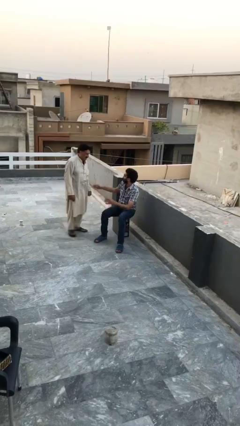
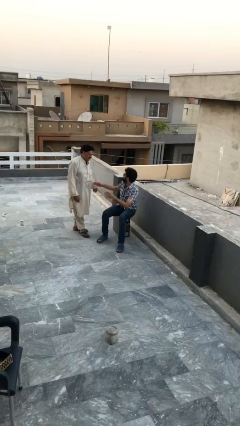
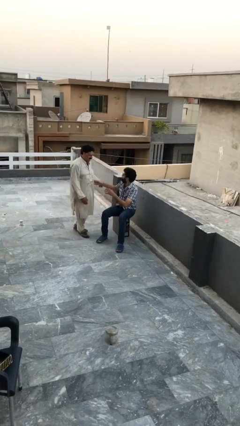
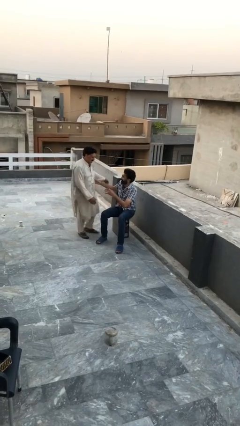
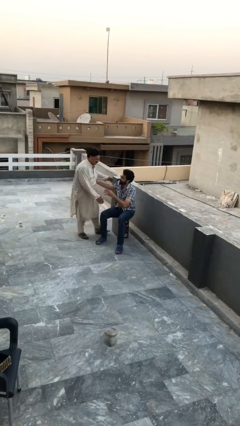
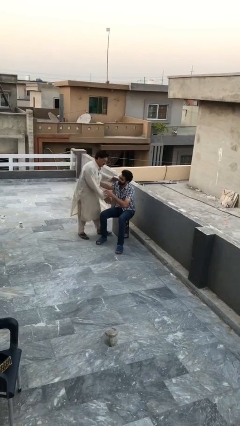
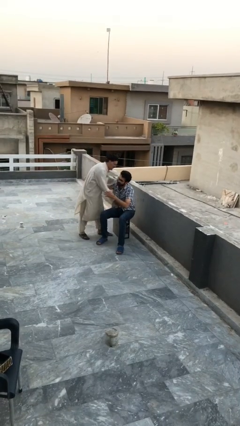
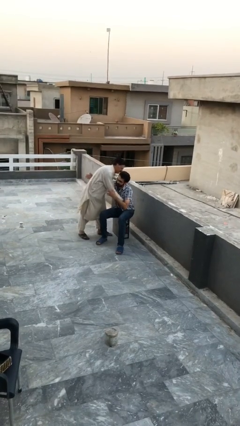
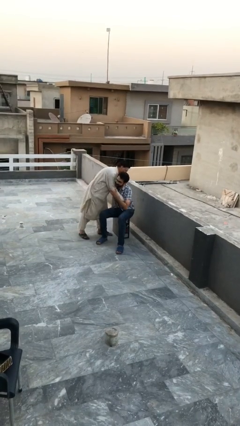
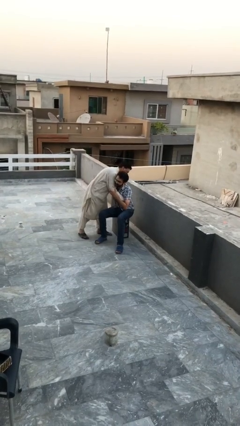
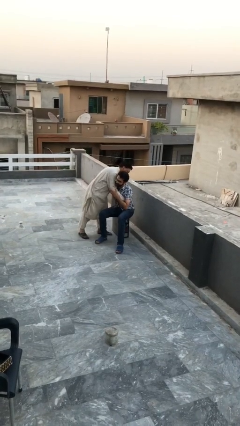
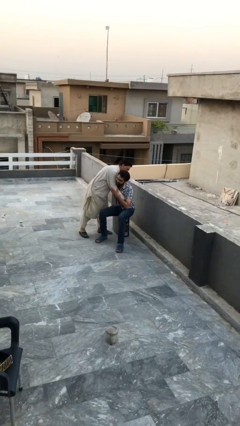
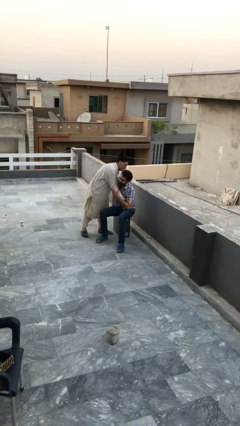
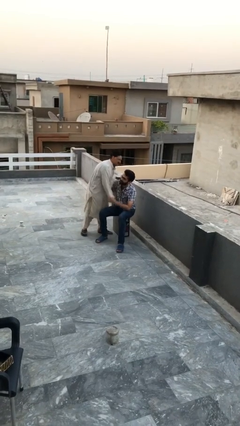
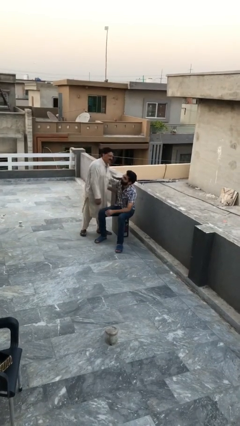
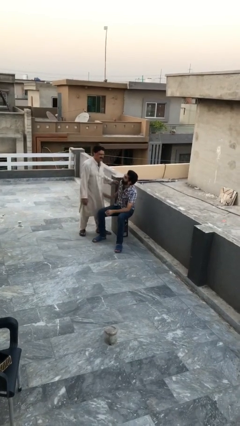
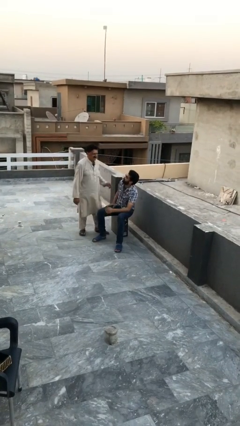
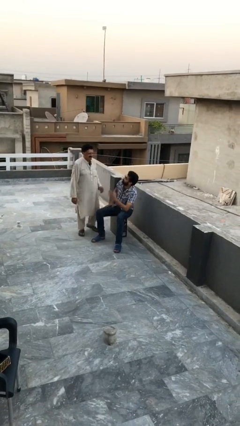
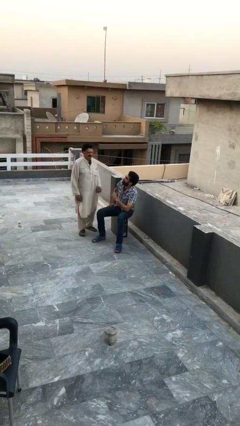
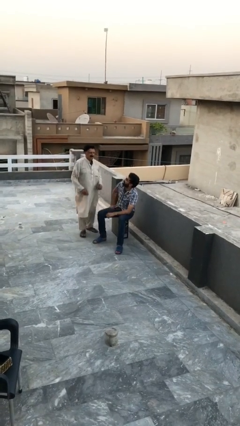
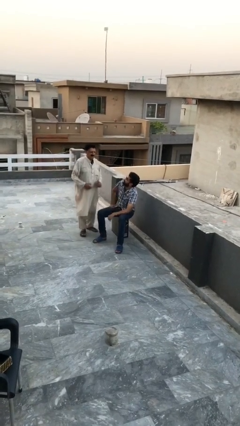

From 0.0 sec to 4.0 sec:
person embraces person

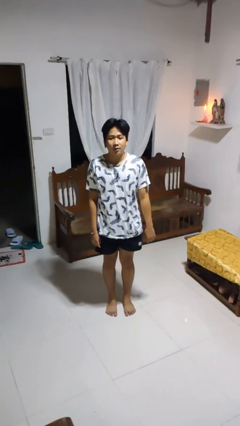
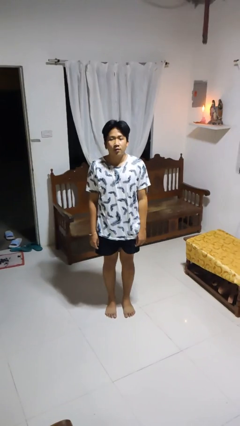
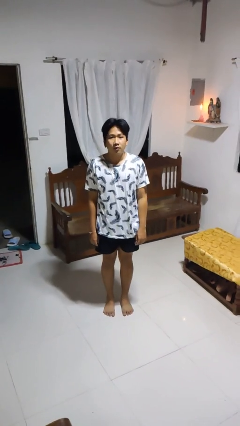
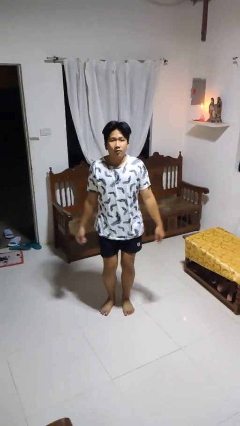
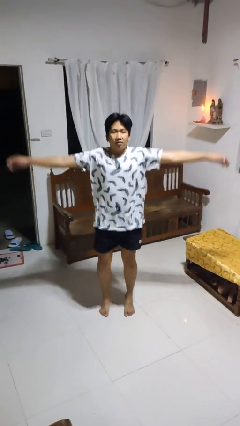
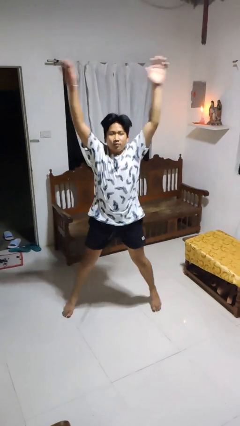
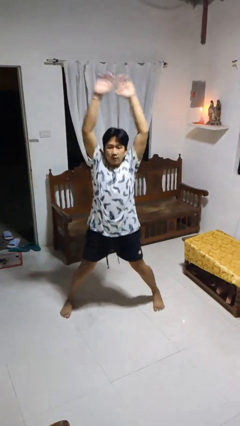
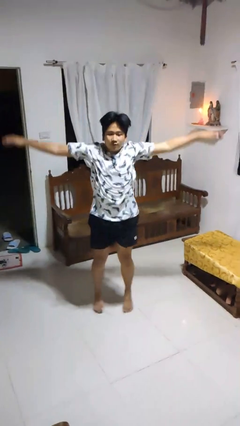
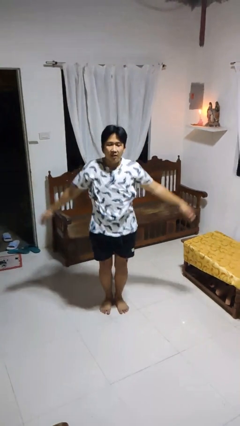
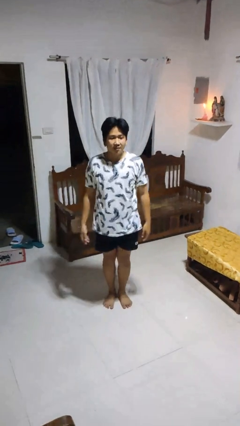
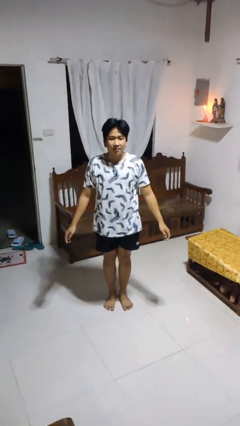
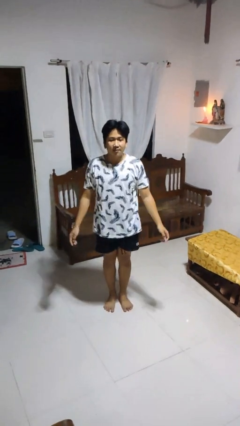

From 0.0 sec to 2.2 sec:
person exercises with jumping jacks

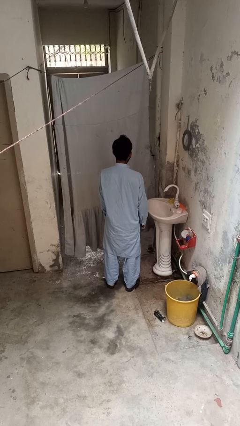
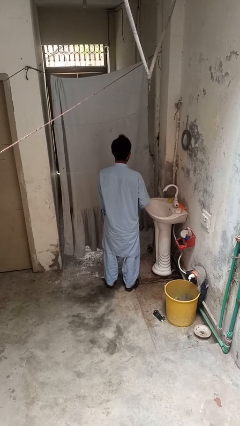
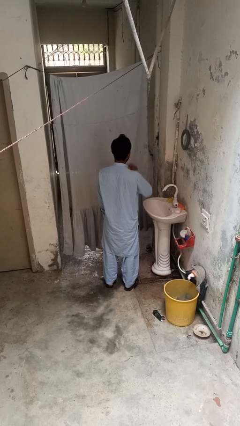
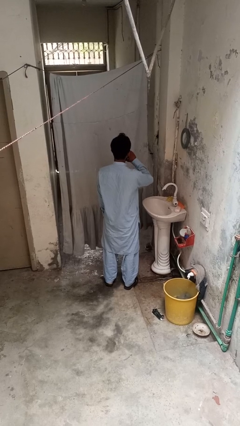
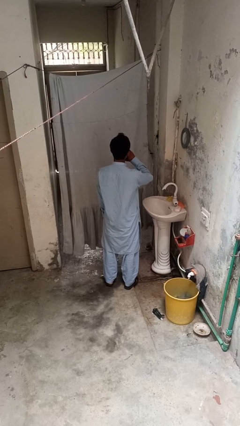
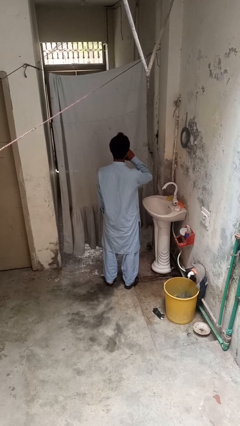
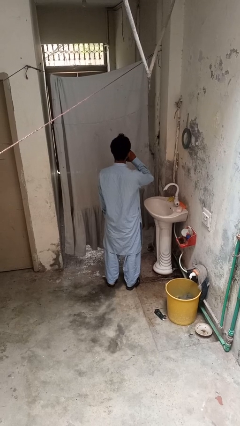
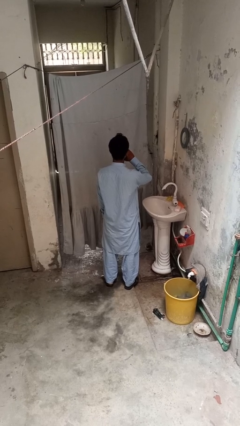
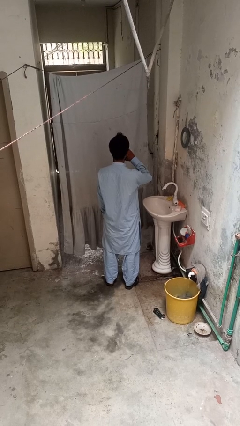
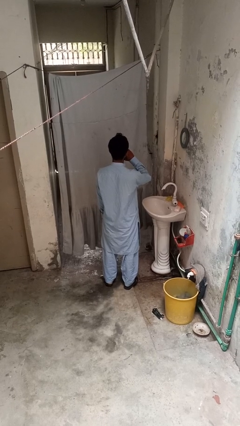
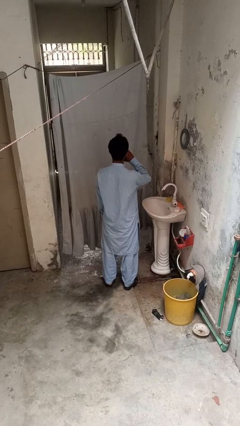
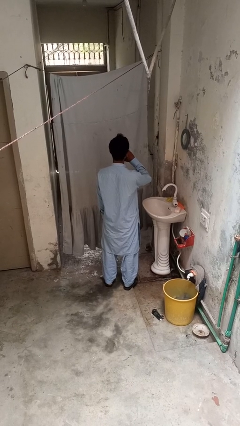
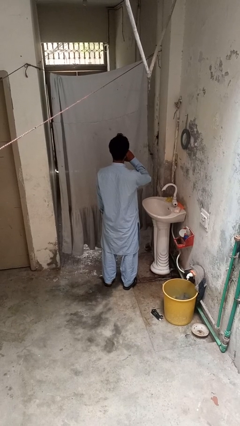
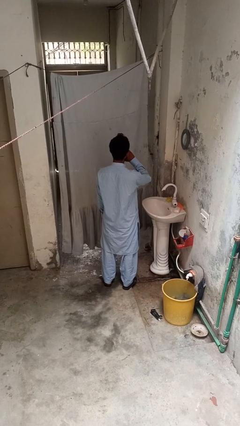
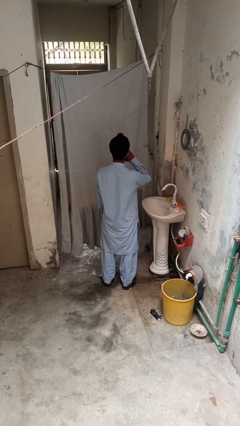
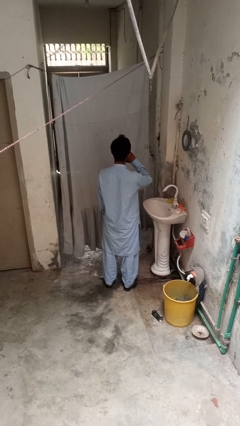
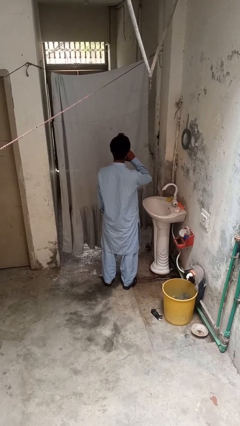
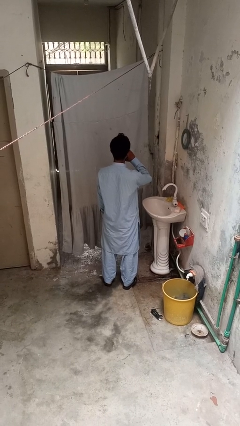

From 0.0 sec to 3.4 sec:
person yawns

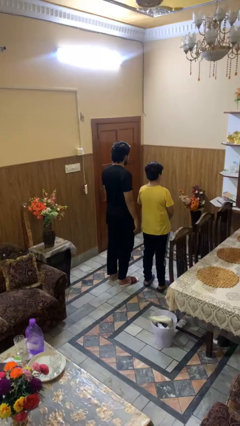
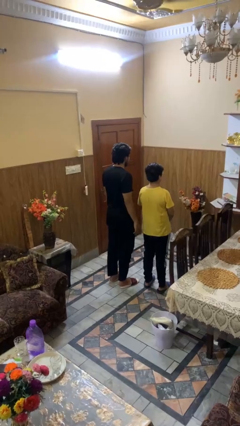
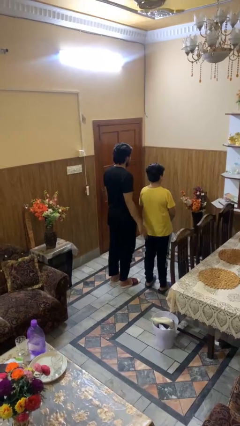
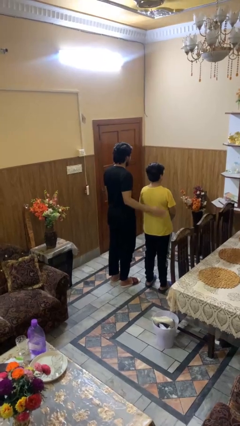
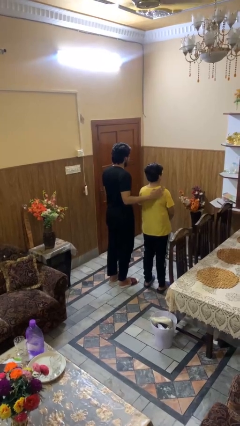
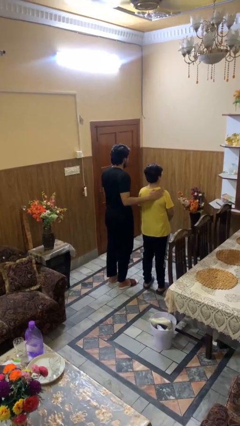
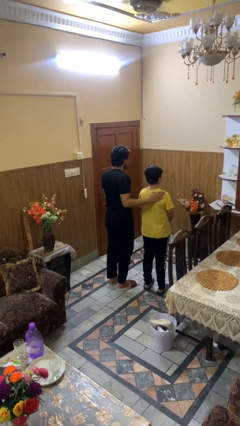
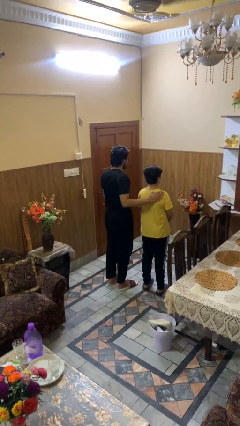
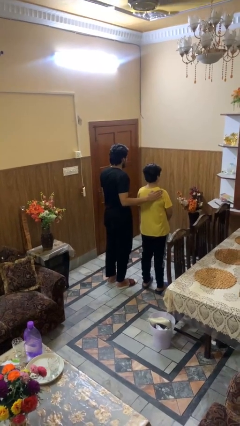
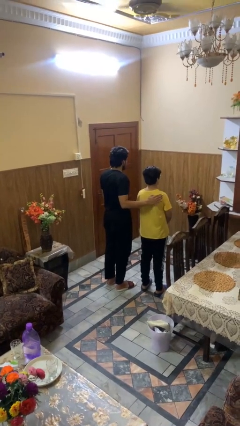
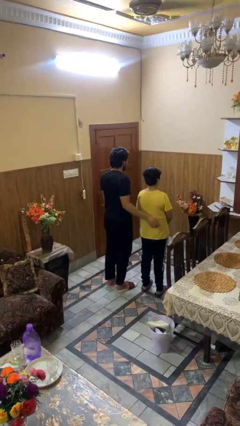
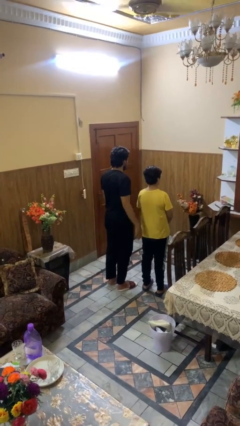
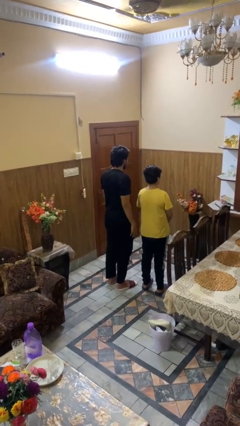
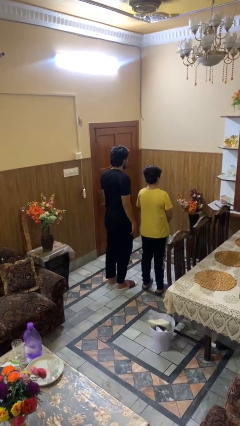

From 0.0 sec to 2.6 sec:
person touches back of person

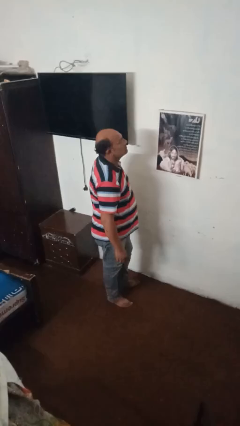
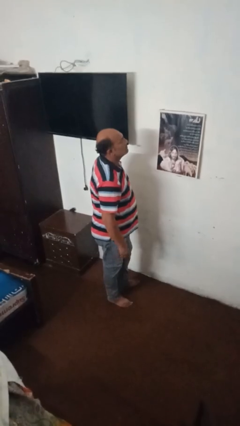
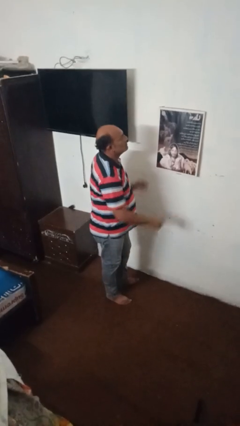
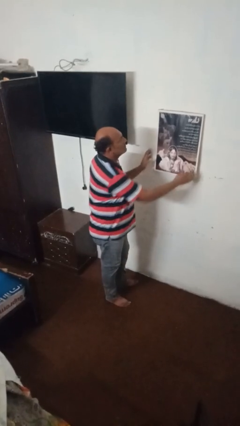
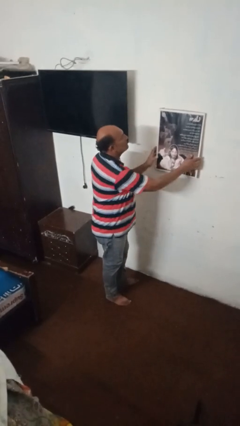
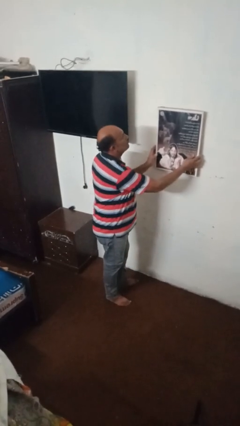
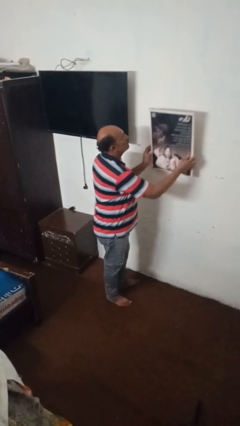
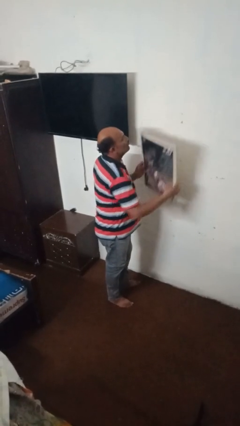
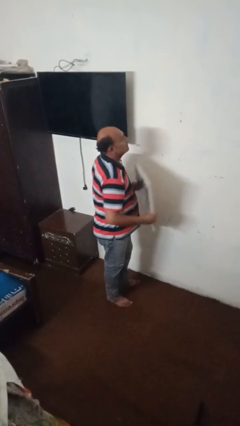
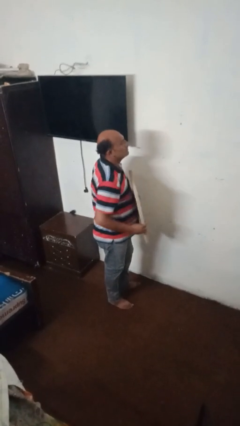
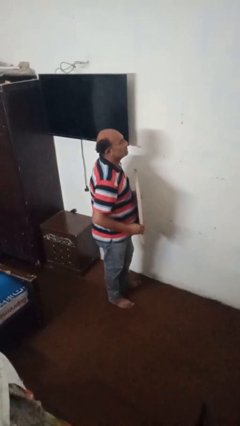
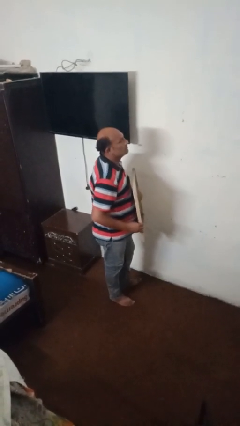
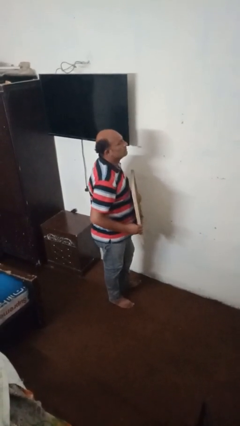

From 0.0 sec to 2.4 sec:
person takes down picture frame

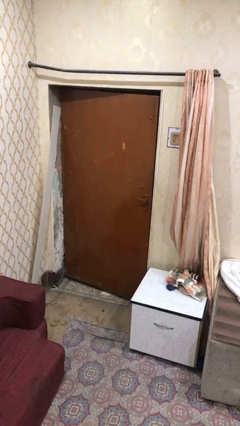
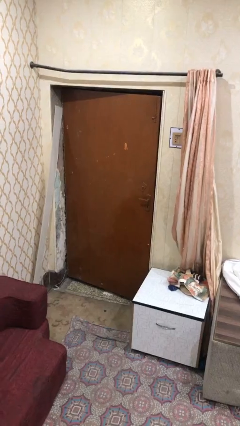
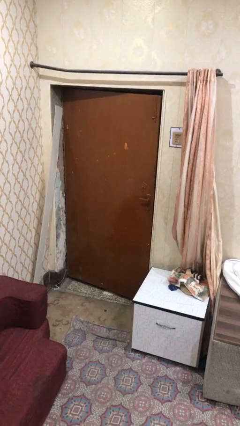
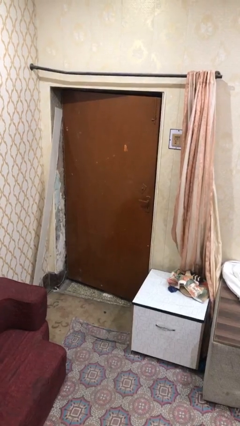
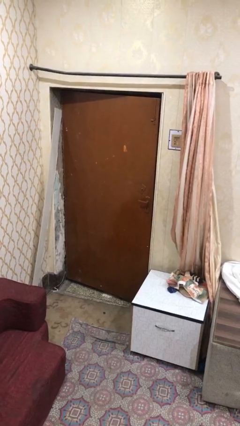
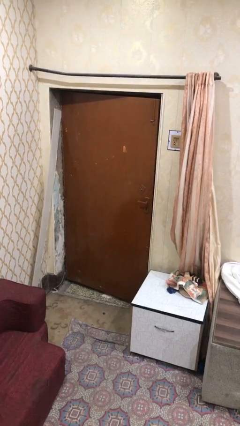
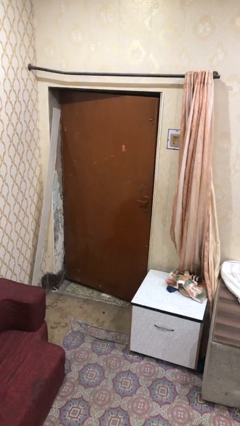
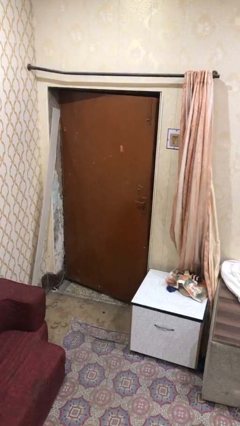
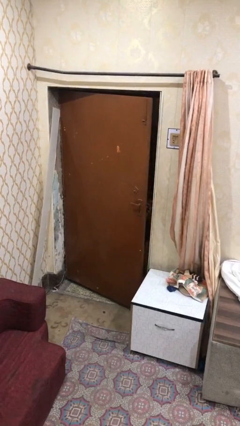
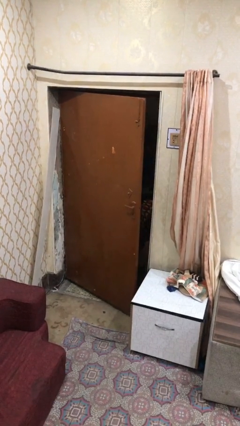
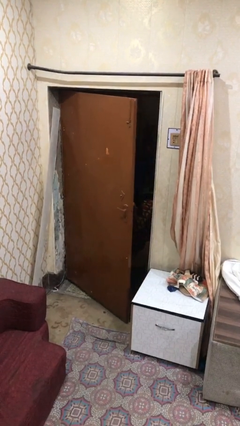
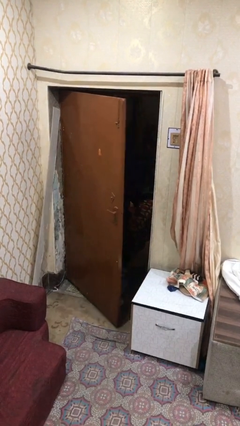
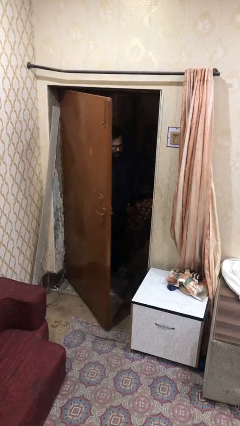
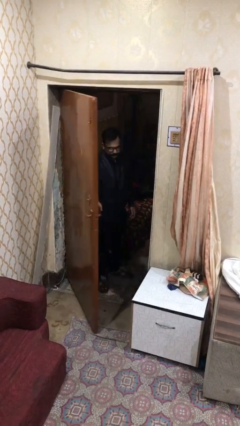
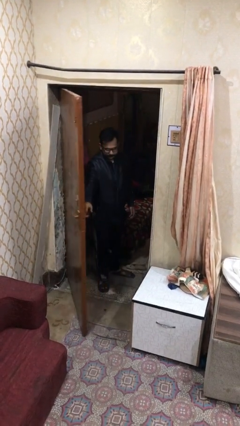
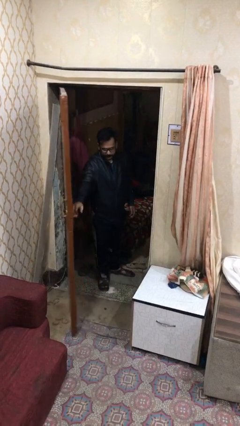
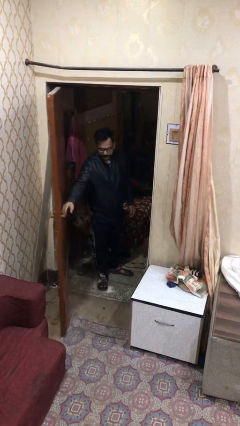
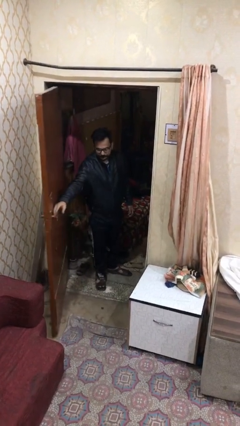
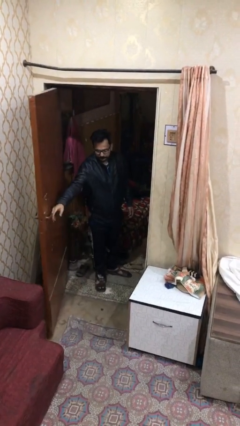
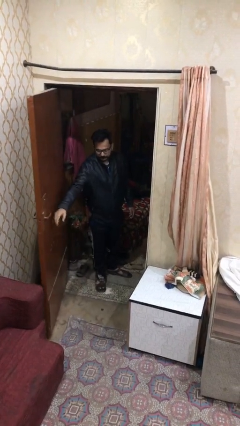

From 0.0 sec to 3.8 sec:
person opens facility door
